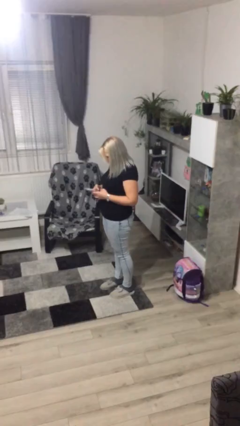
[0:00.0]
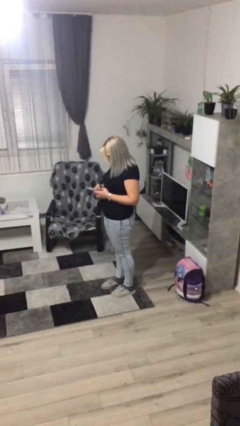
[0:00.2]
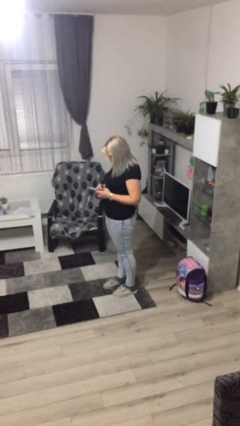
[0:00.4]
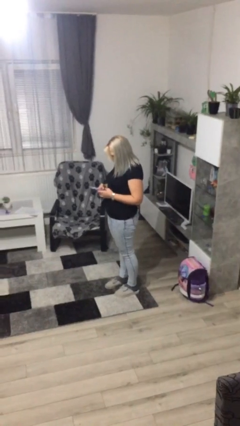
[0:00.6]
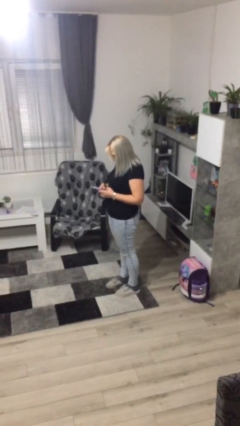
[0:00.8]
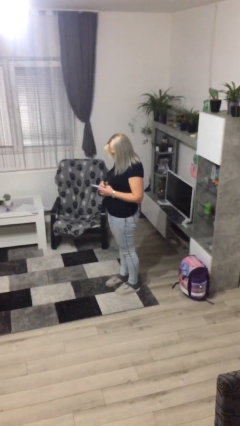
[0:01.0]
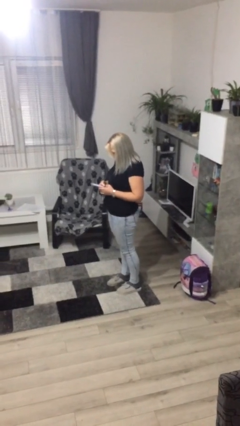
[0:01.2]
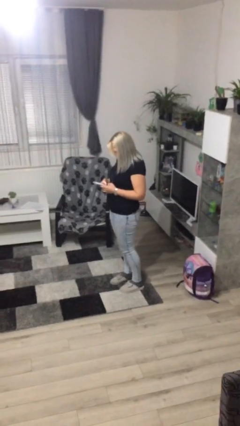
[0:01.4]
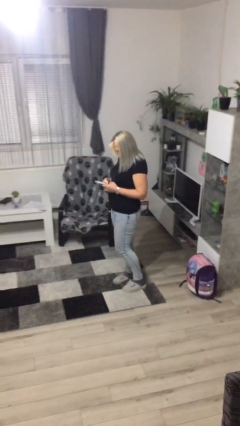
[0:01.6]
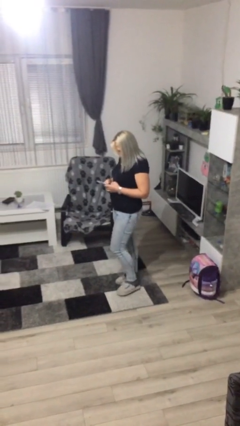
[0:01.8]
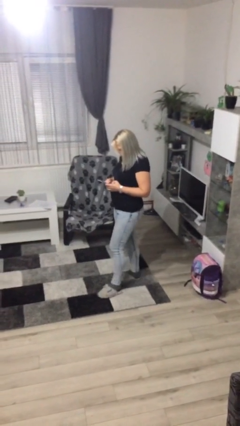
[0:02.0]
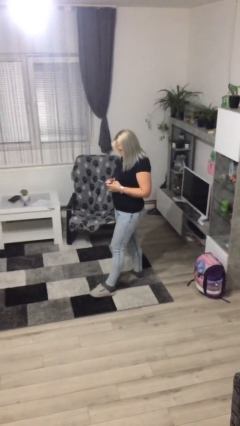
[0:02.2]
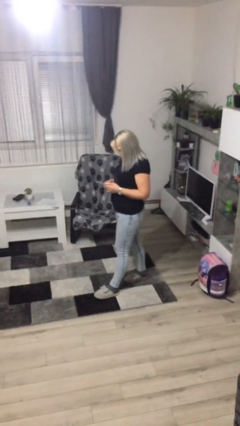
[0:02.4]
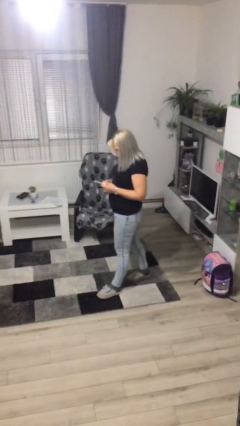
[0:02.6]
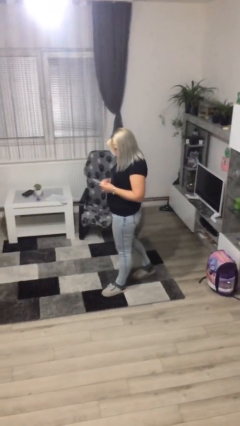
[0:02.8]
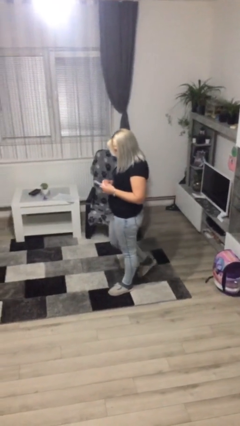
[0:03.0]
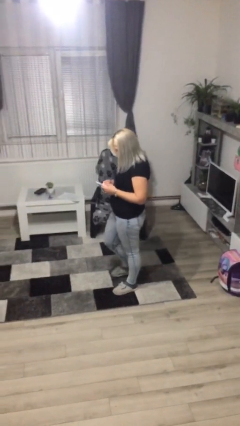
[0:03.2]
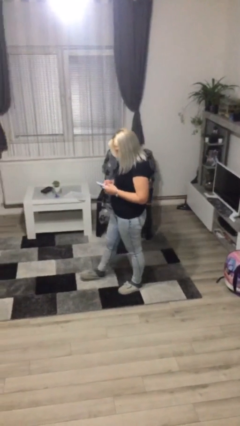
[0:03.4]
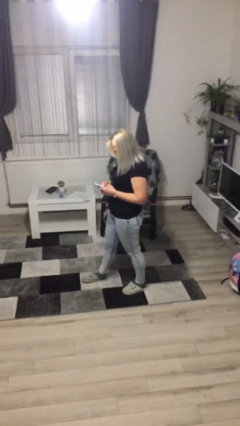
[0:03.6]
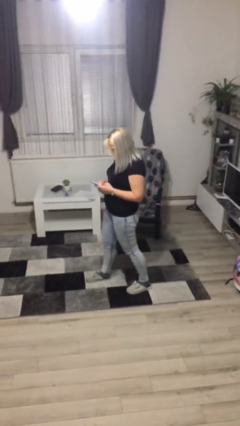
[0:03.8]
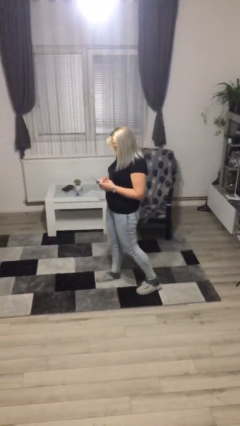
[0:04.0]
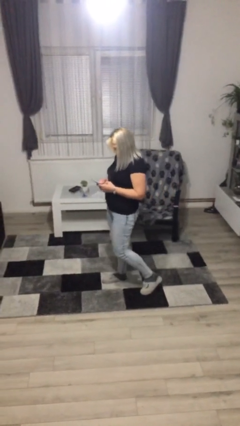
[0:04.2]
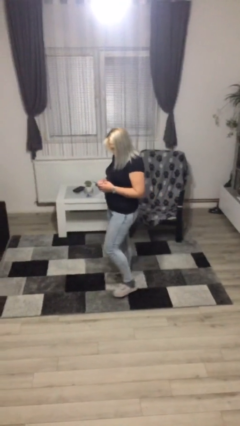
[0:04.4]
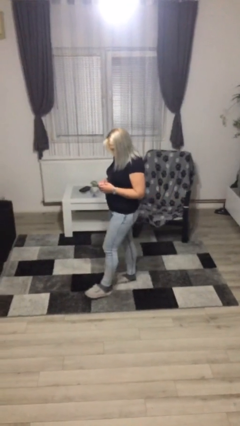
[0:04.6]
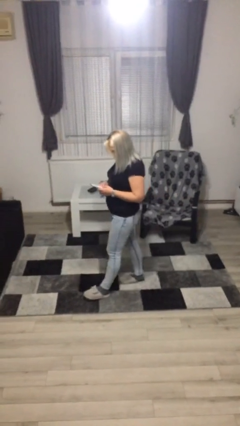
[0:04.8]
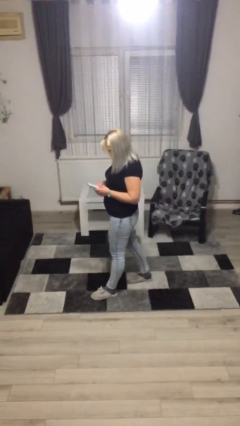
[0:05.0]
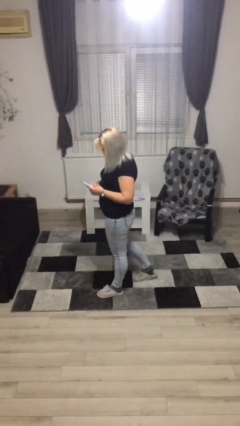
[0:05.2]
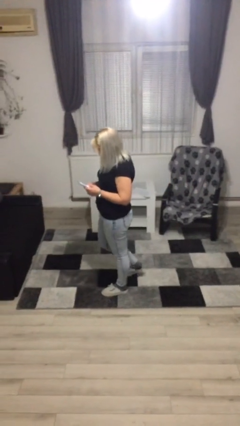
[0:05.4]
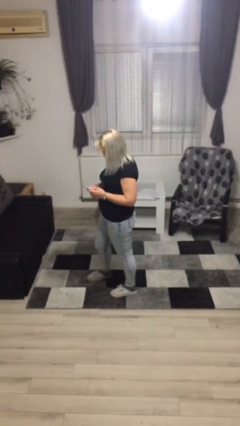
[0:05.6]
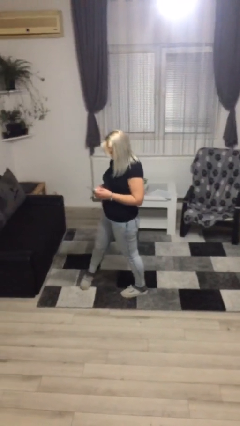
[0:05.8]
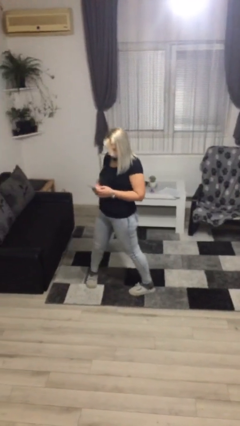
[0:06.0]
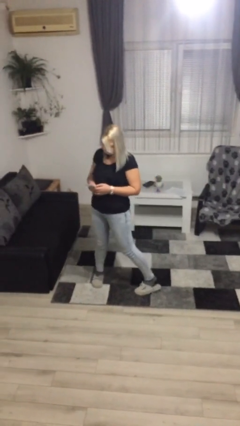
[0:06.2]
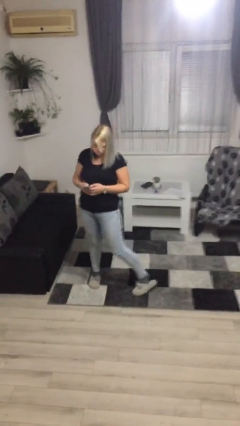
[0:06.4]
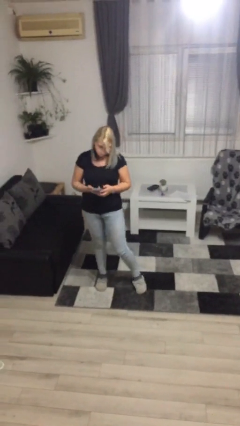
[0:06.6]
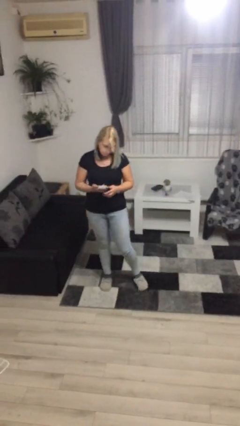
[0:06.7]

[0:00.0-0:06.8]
person texts on phone

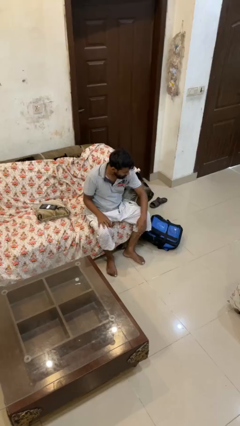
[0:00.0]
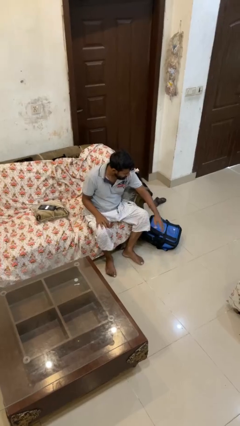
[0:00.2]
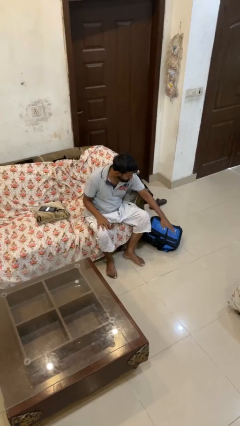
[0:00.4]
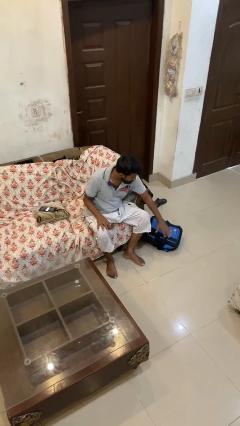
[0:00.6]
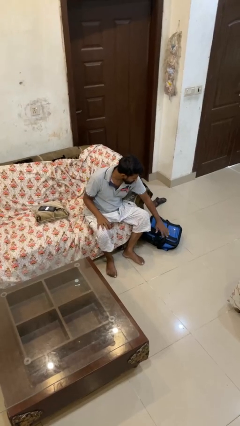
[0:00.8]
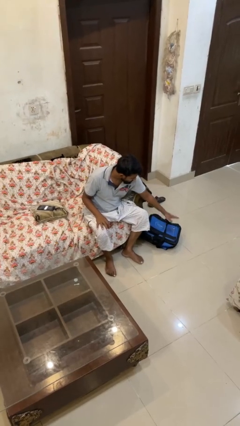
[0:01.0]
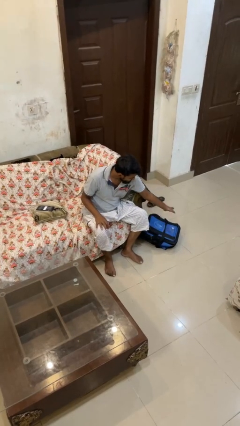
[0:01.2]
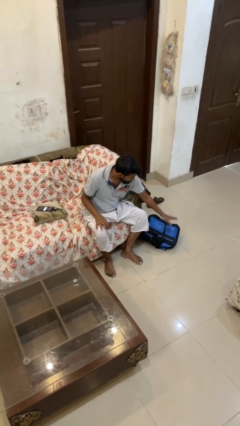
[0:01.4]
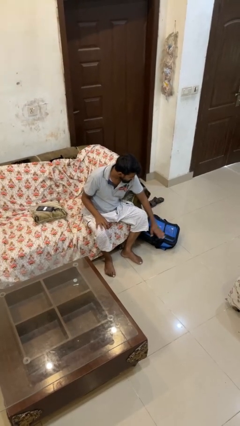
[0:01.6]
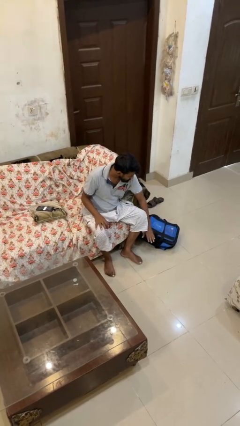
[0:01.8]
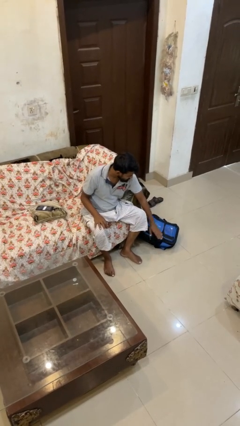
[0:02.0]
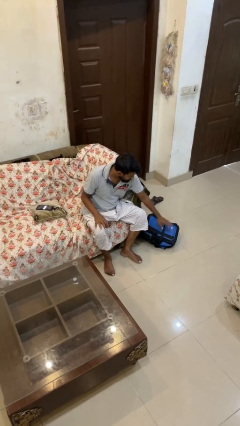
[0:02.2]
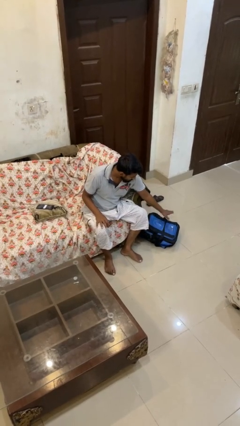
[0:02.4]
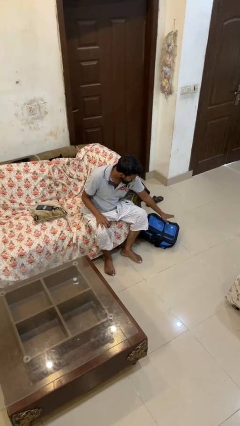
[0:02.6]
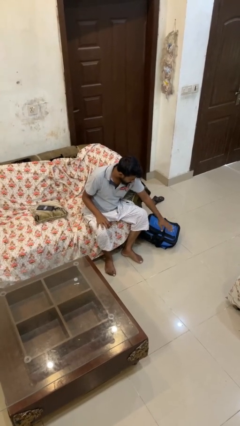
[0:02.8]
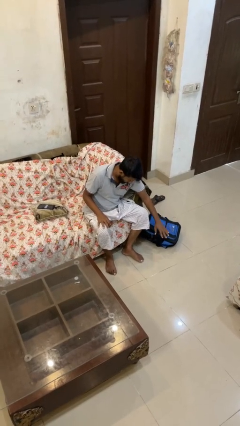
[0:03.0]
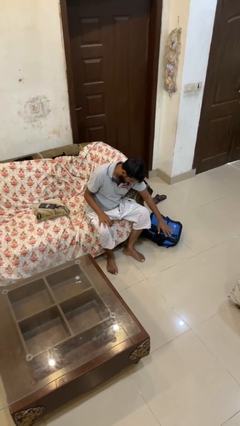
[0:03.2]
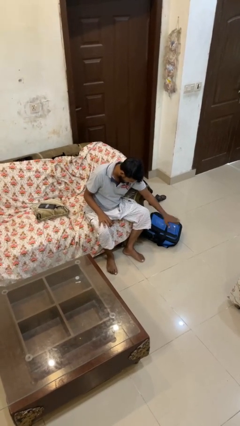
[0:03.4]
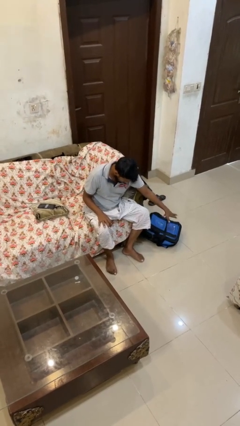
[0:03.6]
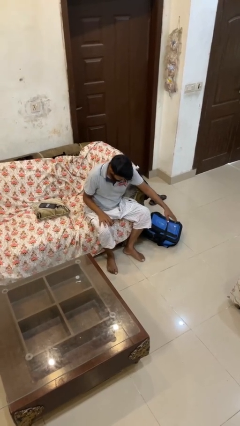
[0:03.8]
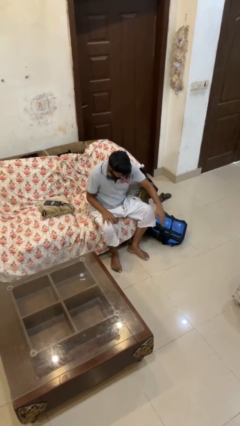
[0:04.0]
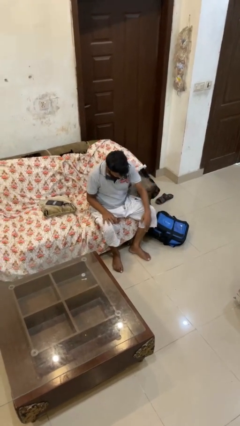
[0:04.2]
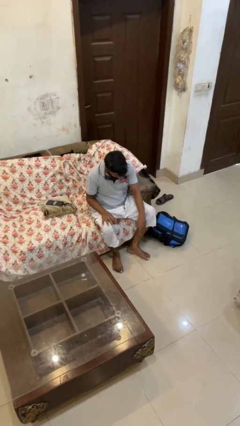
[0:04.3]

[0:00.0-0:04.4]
person waves hand over object

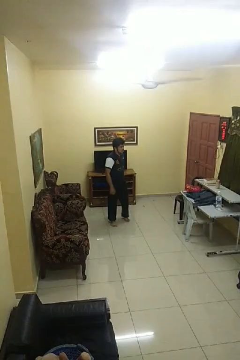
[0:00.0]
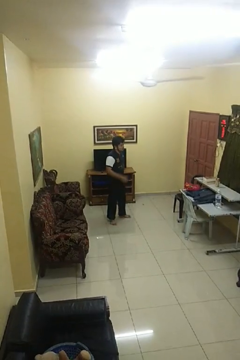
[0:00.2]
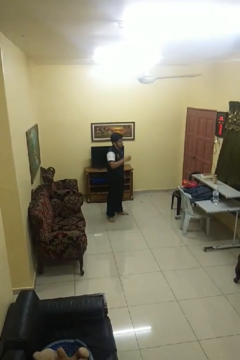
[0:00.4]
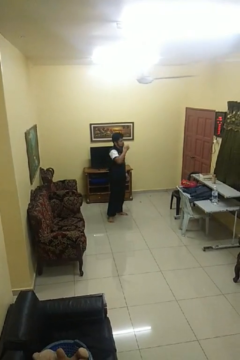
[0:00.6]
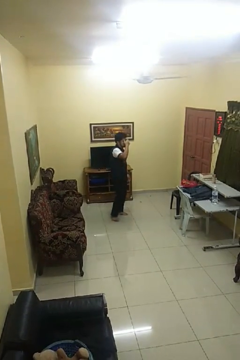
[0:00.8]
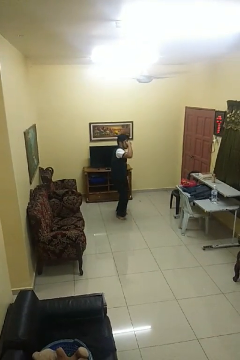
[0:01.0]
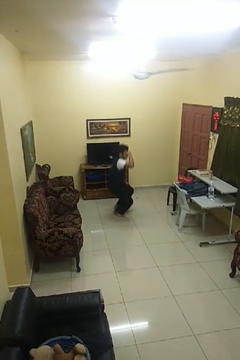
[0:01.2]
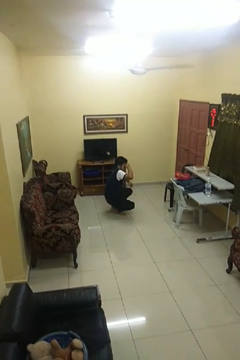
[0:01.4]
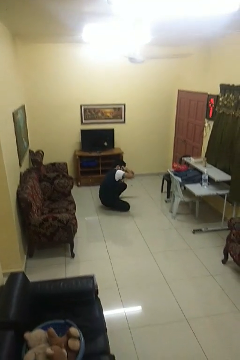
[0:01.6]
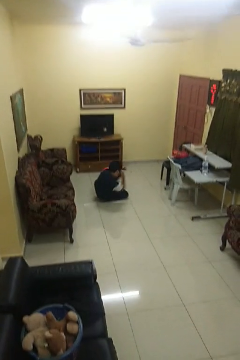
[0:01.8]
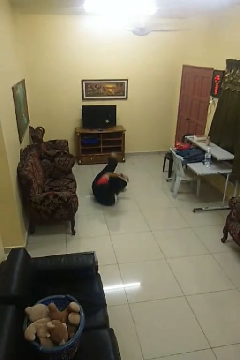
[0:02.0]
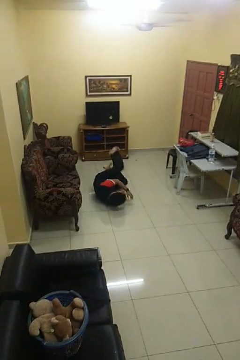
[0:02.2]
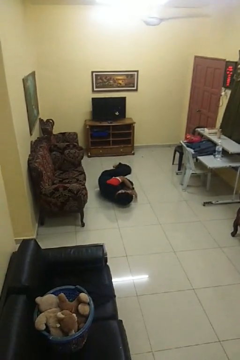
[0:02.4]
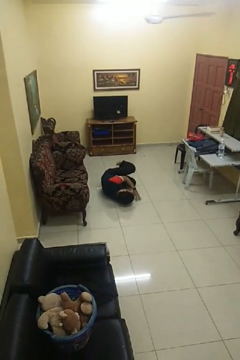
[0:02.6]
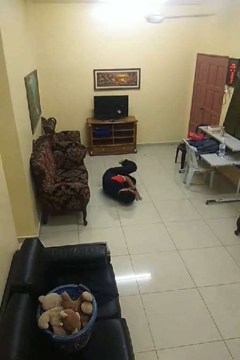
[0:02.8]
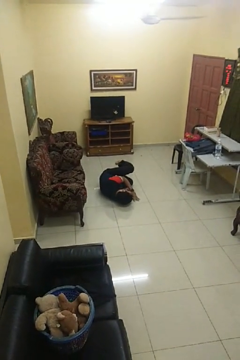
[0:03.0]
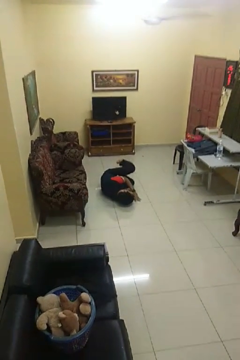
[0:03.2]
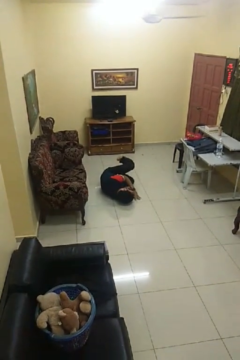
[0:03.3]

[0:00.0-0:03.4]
person falls while standing

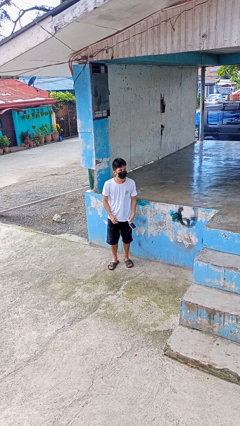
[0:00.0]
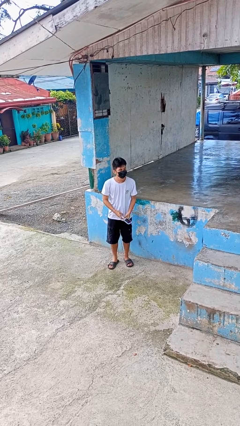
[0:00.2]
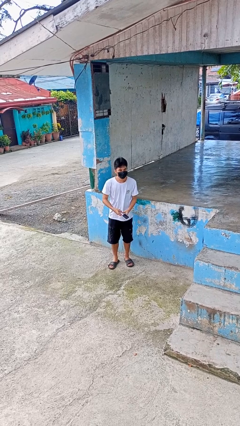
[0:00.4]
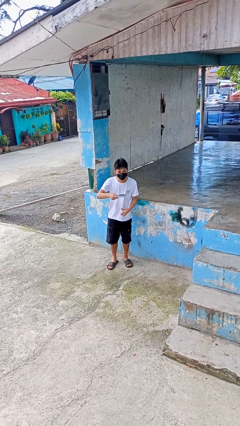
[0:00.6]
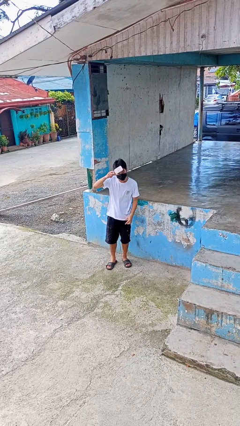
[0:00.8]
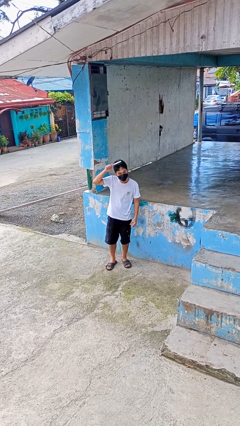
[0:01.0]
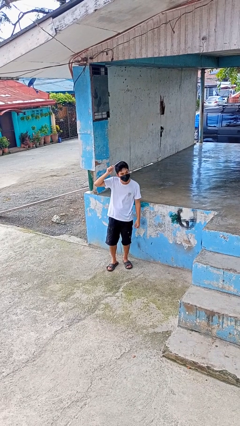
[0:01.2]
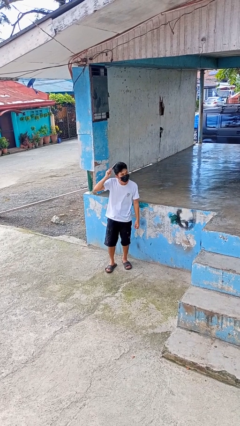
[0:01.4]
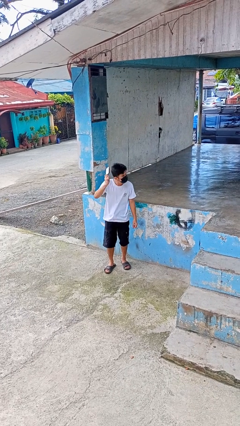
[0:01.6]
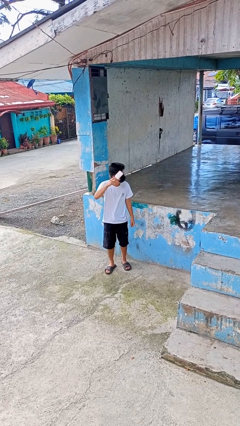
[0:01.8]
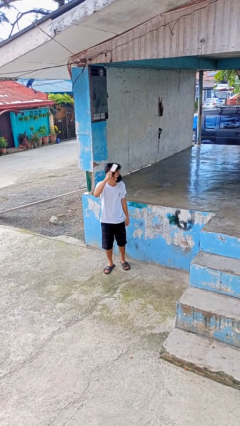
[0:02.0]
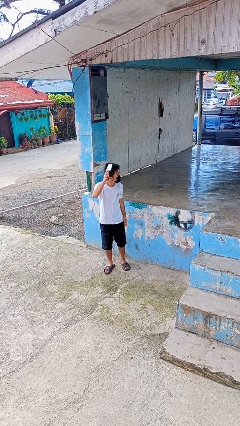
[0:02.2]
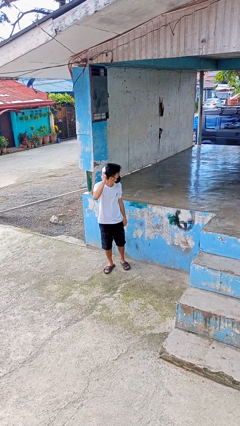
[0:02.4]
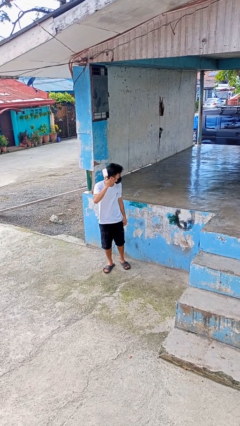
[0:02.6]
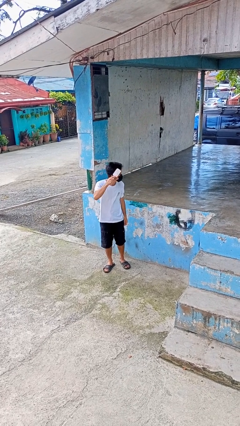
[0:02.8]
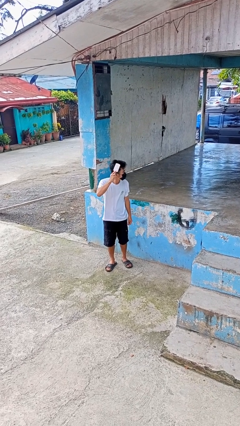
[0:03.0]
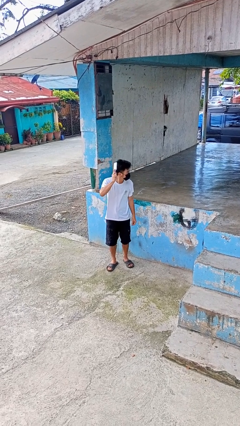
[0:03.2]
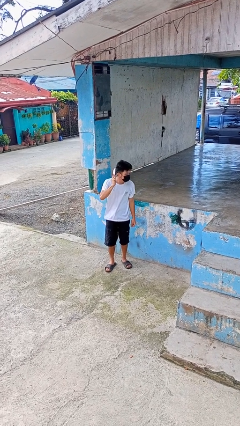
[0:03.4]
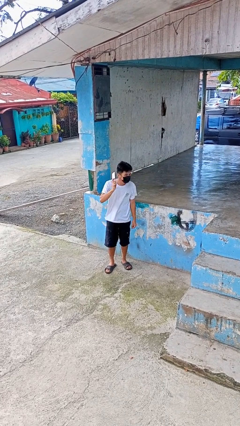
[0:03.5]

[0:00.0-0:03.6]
person brushes hair

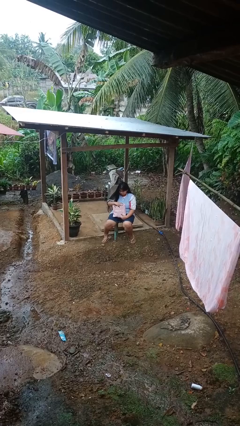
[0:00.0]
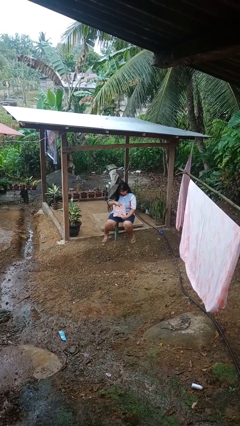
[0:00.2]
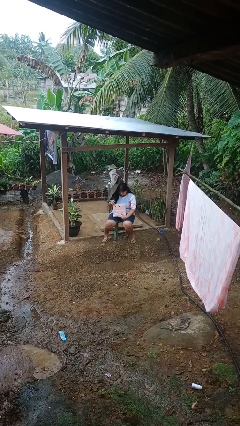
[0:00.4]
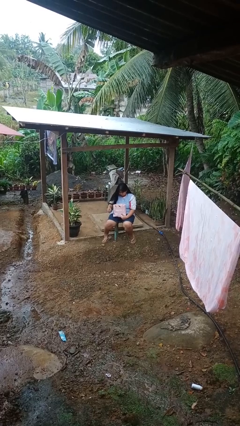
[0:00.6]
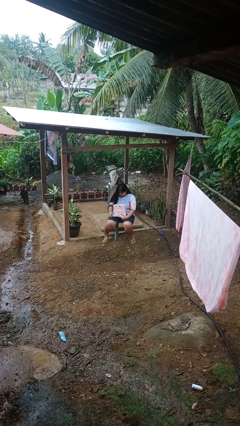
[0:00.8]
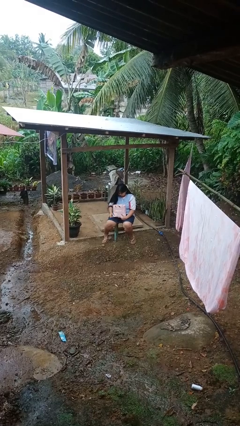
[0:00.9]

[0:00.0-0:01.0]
person puts object into bag
